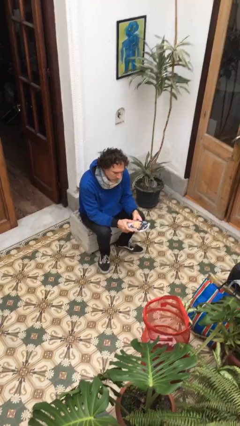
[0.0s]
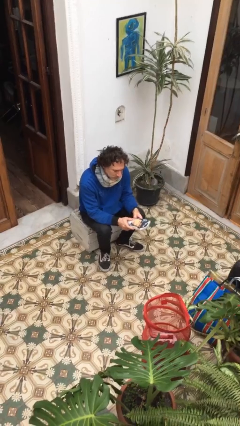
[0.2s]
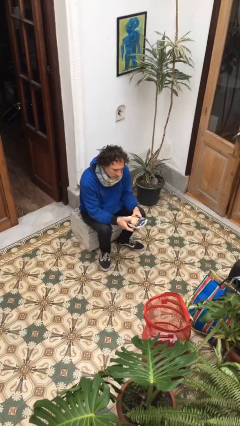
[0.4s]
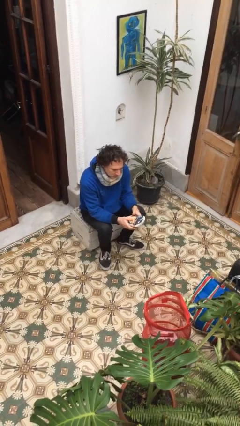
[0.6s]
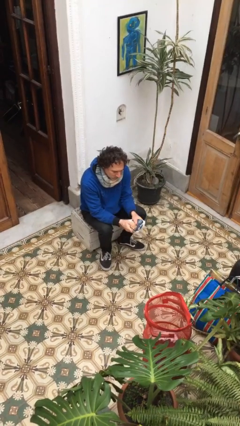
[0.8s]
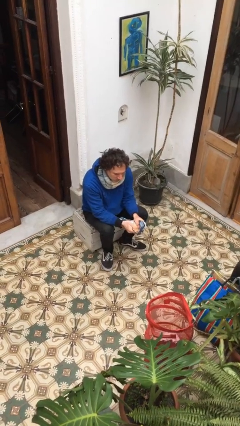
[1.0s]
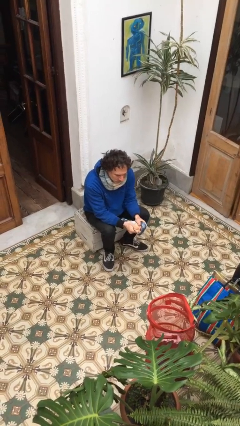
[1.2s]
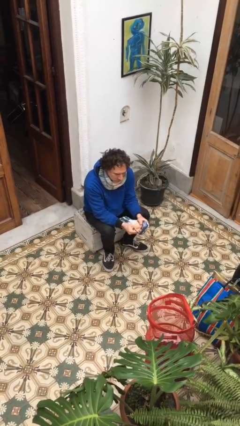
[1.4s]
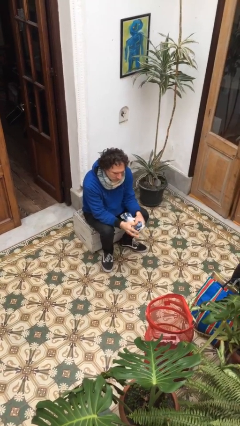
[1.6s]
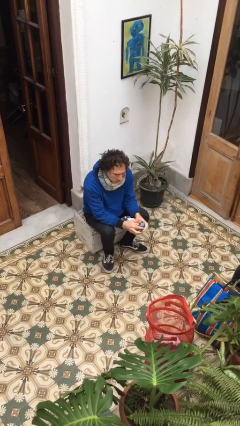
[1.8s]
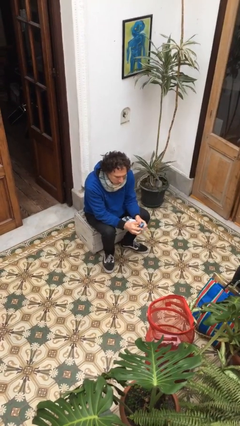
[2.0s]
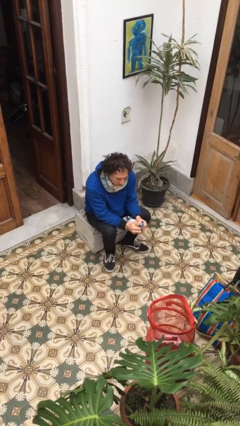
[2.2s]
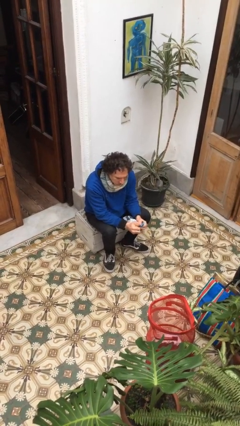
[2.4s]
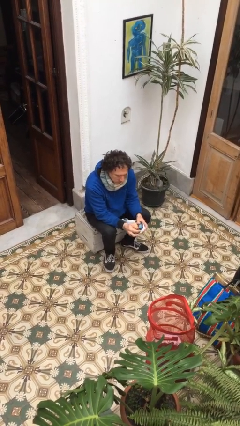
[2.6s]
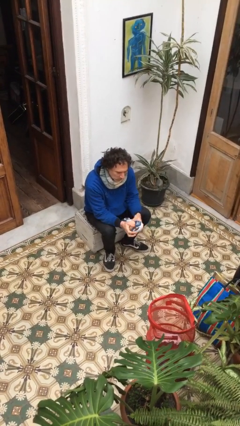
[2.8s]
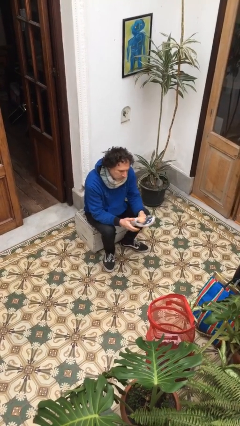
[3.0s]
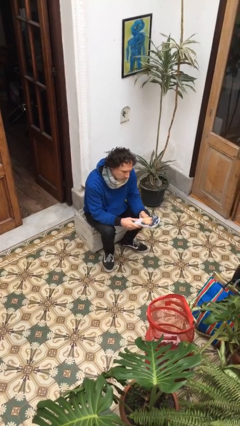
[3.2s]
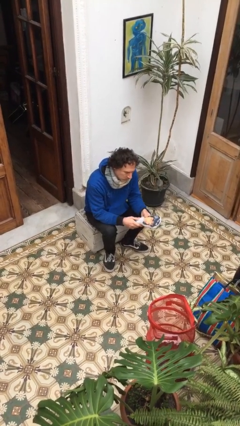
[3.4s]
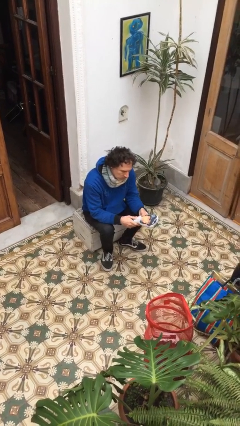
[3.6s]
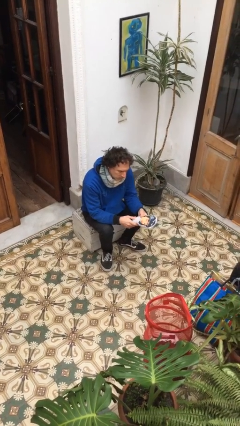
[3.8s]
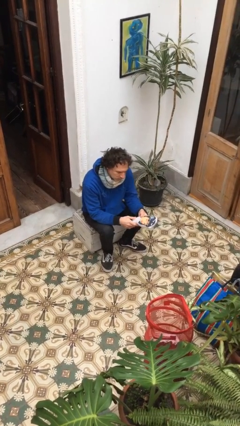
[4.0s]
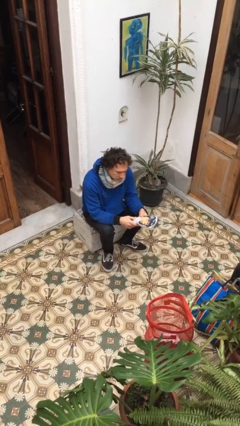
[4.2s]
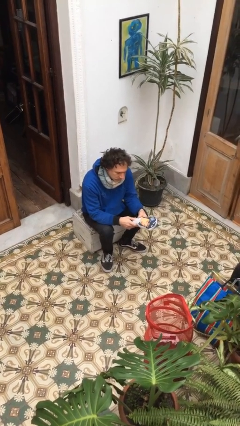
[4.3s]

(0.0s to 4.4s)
person squeezes object

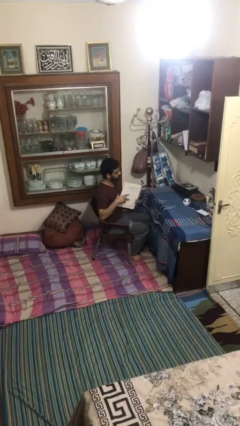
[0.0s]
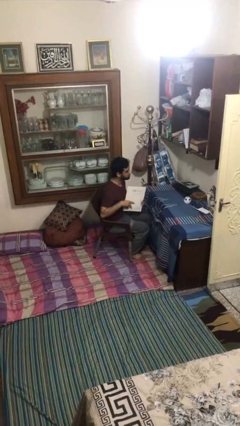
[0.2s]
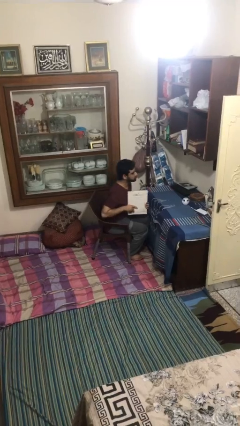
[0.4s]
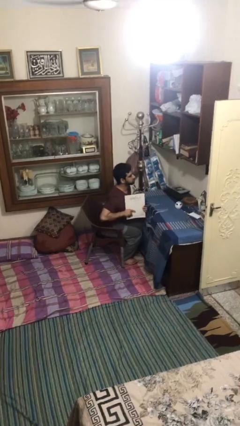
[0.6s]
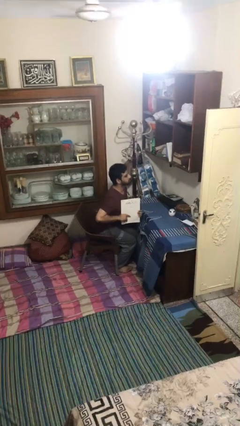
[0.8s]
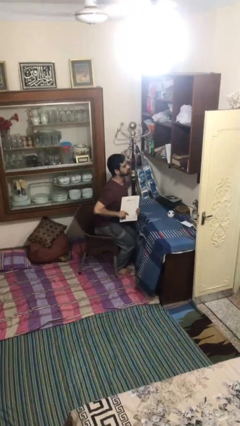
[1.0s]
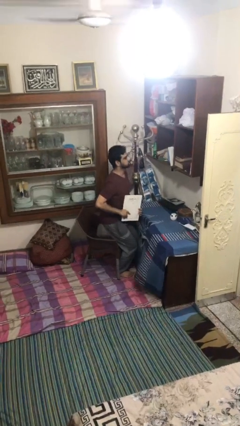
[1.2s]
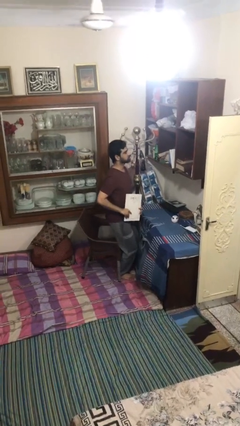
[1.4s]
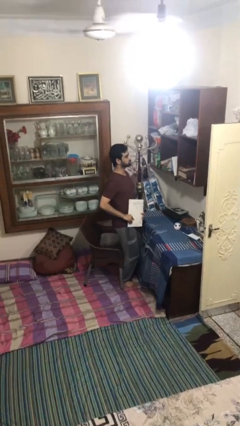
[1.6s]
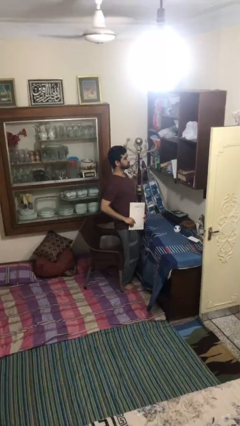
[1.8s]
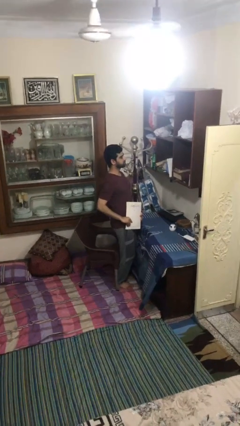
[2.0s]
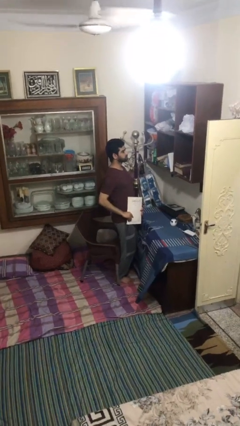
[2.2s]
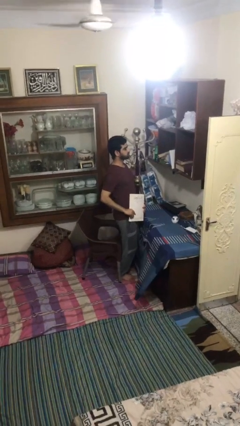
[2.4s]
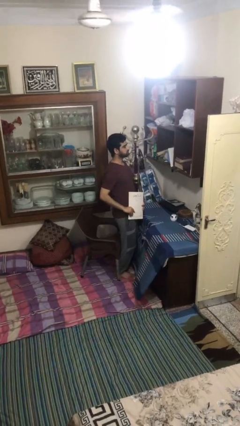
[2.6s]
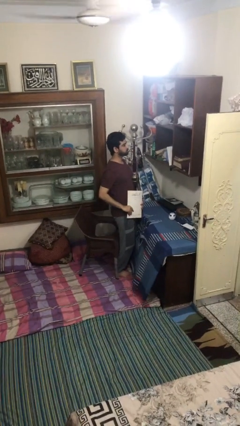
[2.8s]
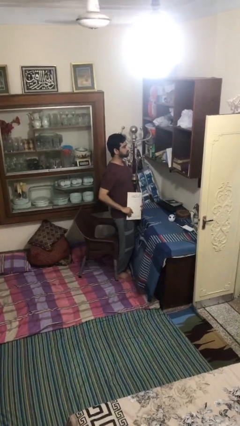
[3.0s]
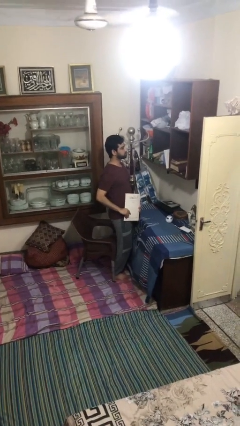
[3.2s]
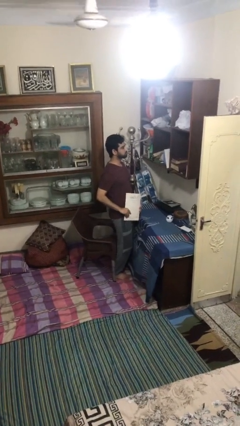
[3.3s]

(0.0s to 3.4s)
person stands up

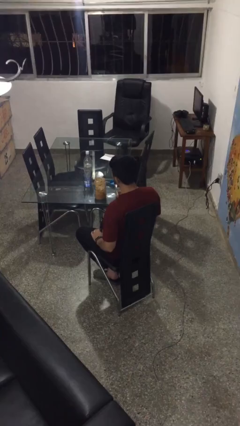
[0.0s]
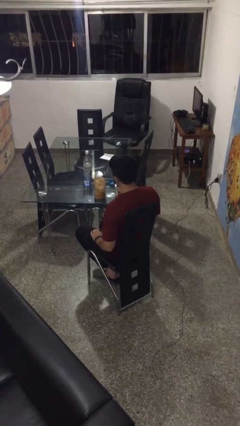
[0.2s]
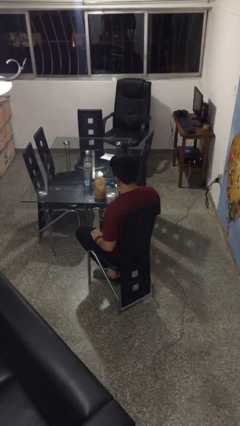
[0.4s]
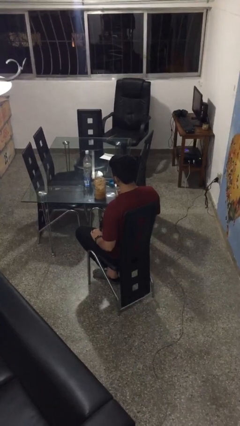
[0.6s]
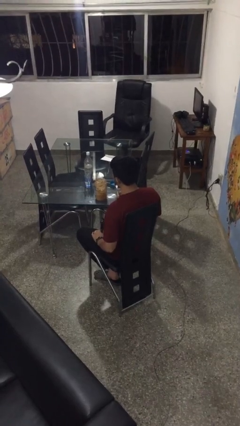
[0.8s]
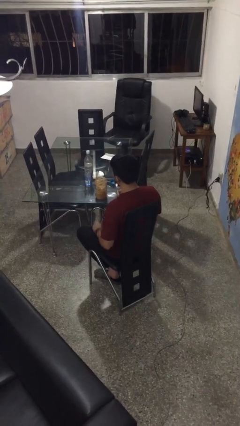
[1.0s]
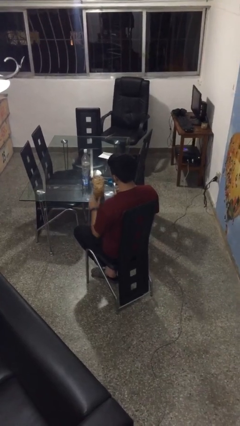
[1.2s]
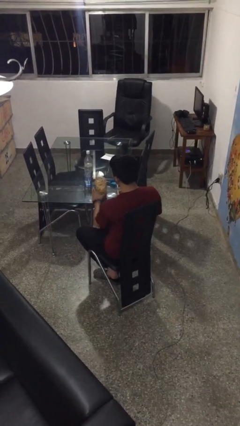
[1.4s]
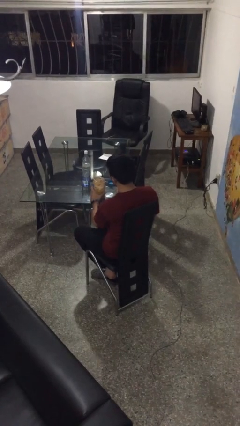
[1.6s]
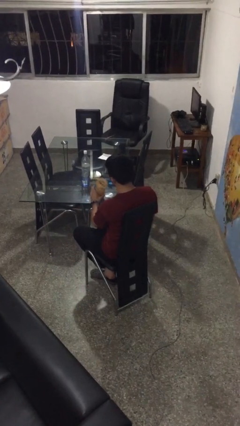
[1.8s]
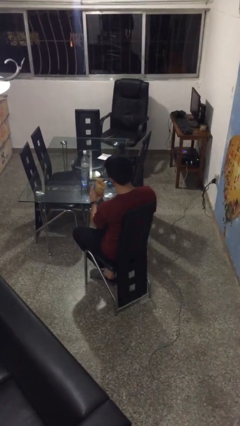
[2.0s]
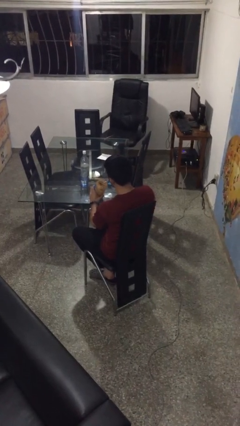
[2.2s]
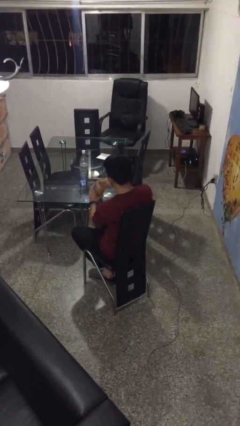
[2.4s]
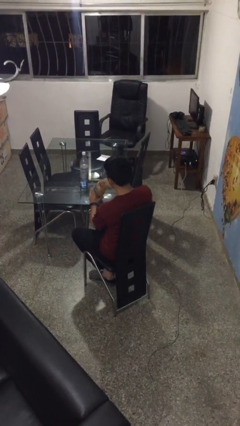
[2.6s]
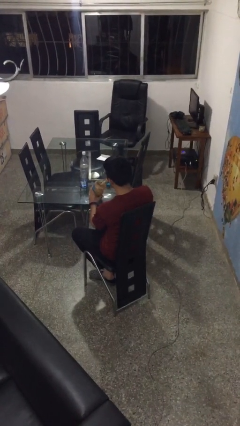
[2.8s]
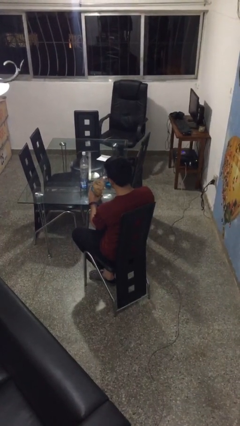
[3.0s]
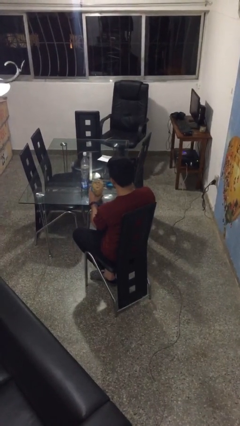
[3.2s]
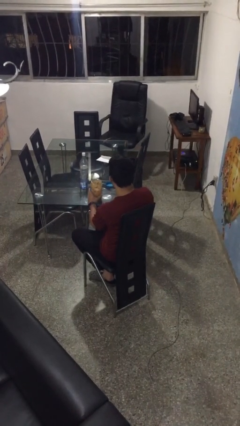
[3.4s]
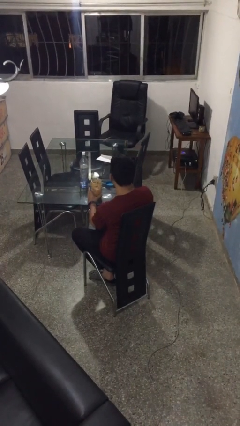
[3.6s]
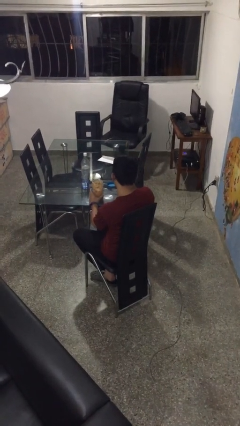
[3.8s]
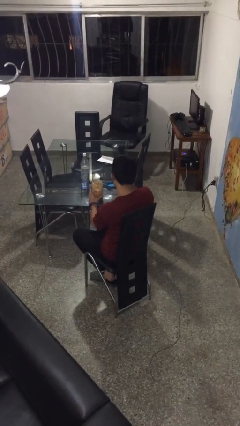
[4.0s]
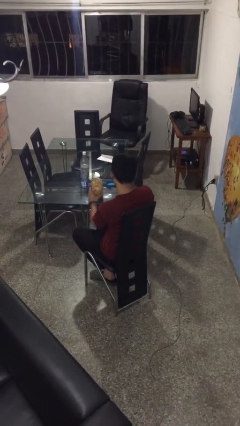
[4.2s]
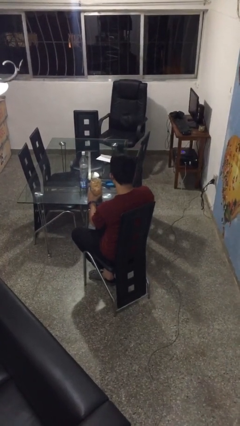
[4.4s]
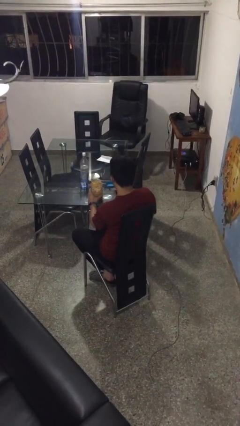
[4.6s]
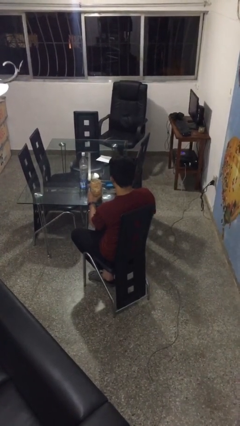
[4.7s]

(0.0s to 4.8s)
person eats with utensil

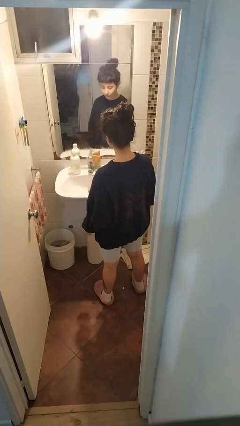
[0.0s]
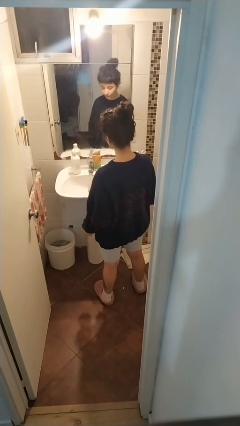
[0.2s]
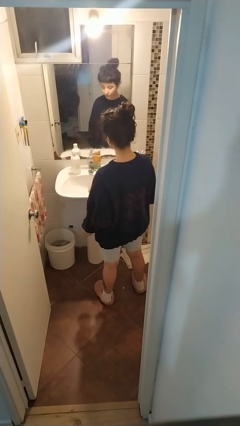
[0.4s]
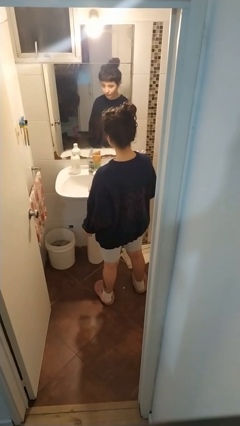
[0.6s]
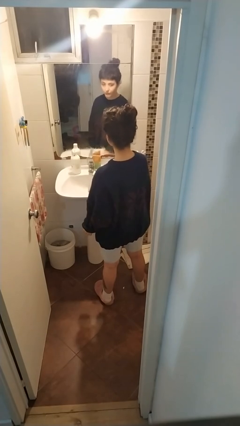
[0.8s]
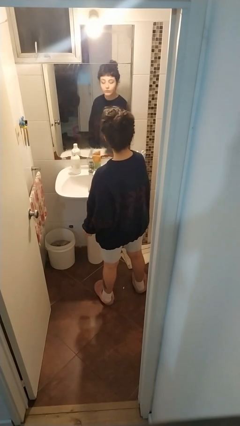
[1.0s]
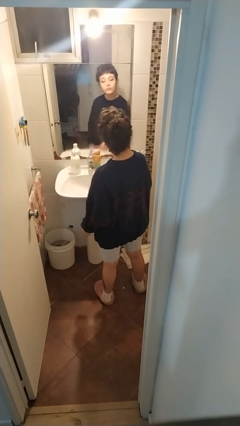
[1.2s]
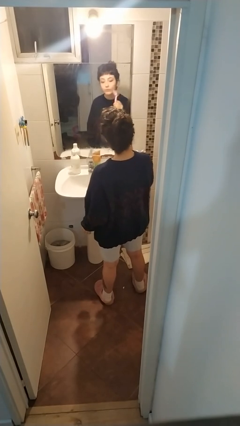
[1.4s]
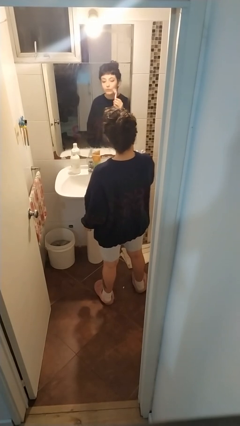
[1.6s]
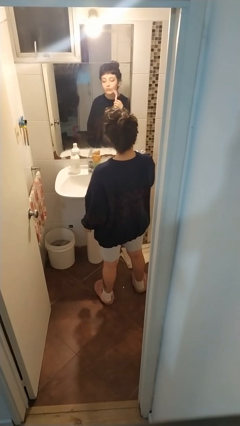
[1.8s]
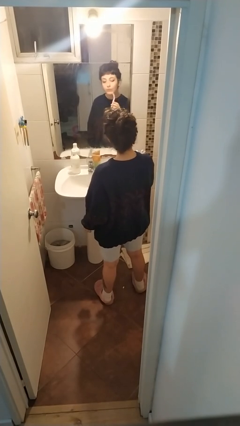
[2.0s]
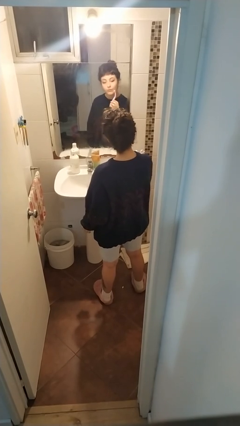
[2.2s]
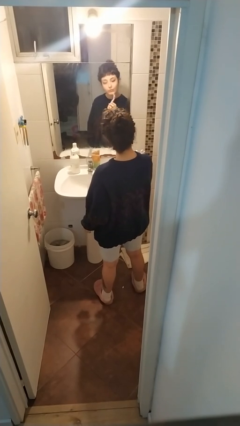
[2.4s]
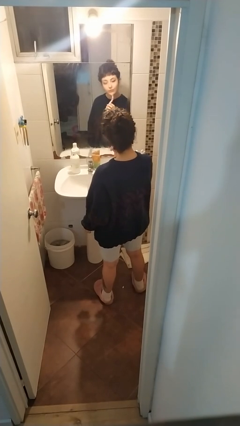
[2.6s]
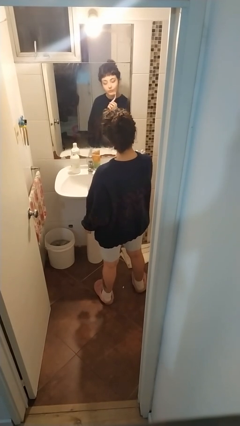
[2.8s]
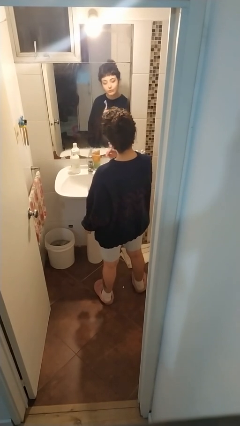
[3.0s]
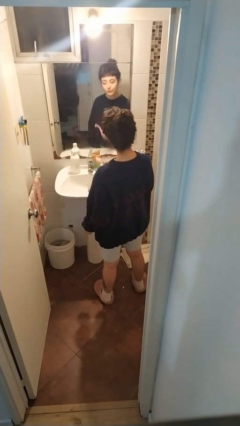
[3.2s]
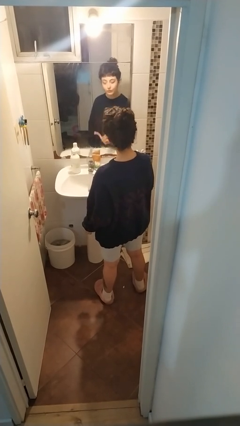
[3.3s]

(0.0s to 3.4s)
person shaves face

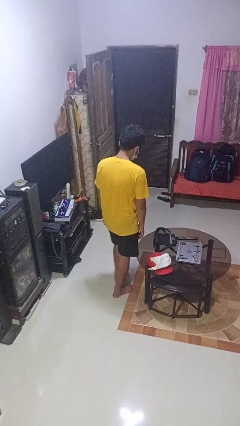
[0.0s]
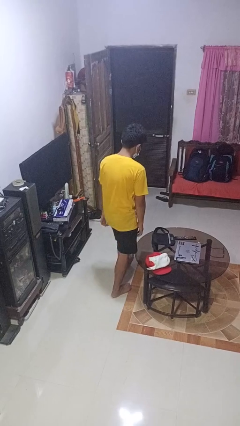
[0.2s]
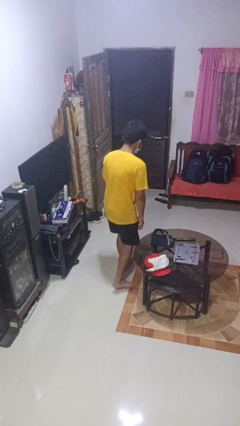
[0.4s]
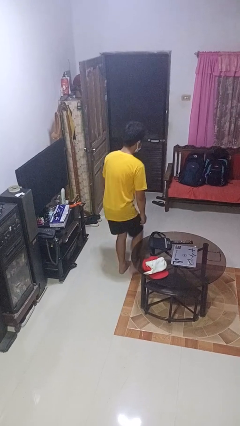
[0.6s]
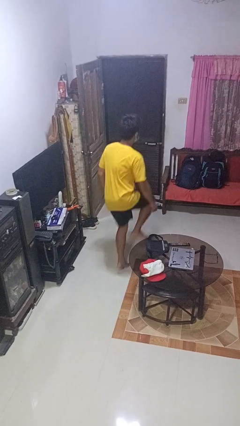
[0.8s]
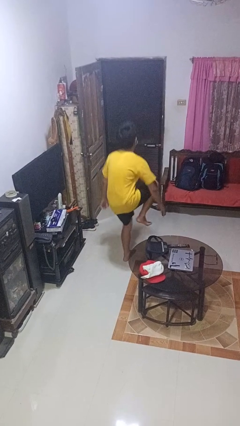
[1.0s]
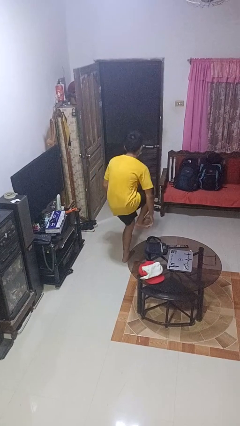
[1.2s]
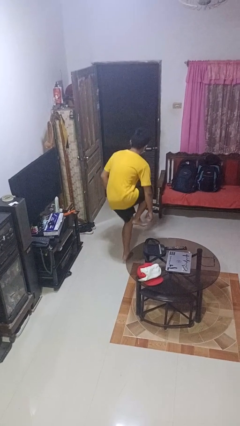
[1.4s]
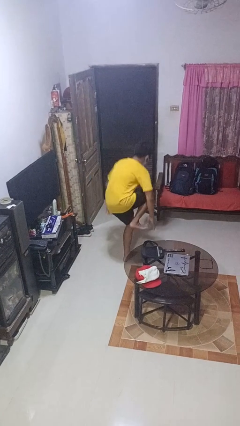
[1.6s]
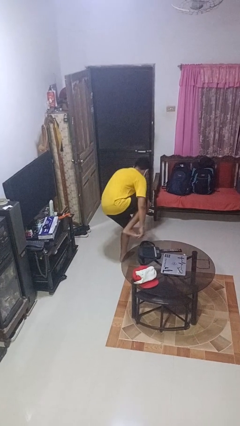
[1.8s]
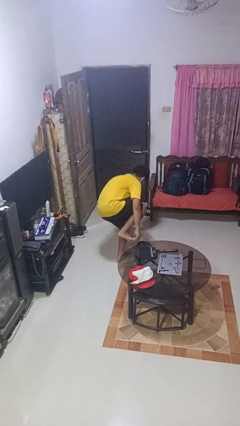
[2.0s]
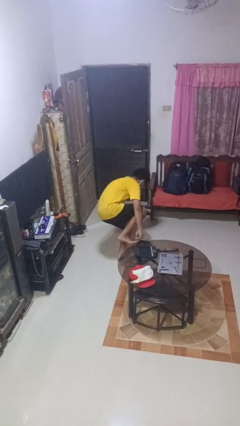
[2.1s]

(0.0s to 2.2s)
person trips on object on floor
